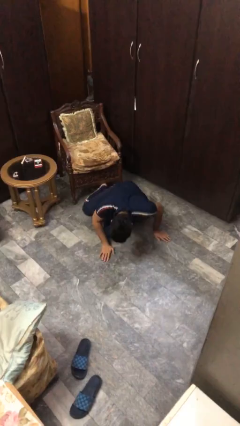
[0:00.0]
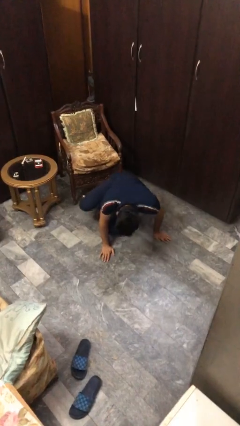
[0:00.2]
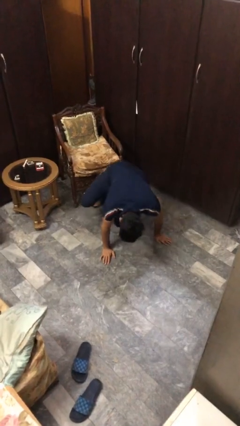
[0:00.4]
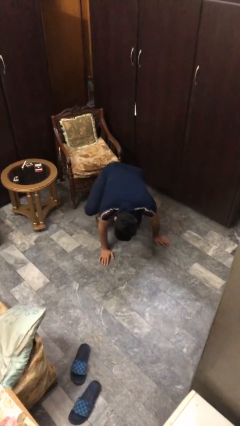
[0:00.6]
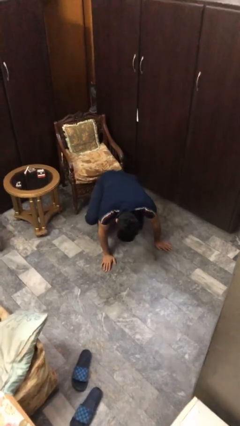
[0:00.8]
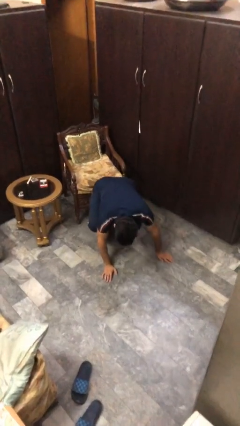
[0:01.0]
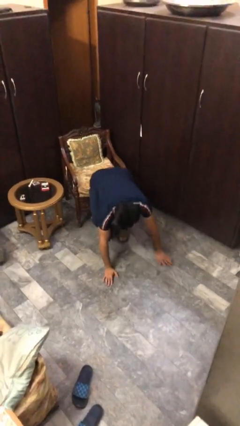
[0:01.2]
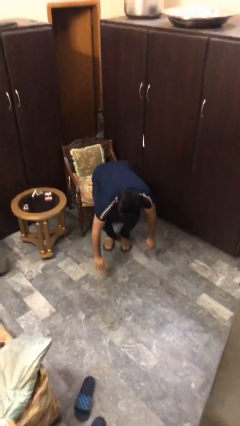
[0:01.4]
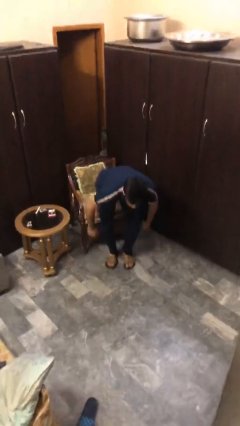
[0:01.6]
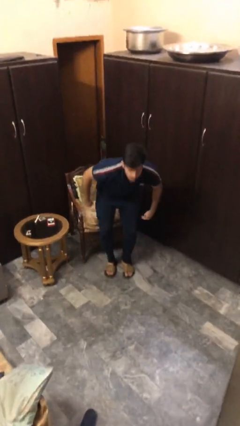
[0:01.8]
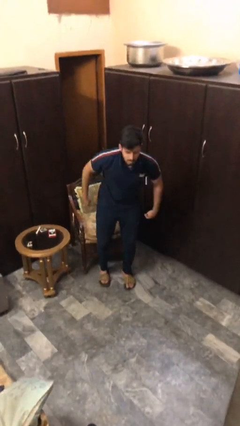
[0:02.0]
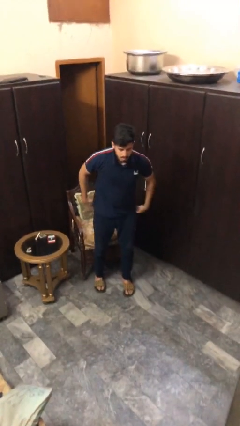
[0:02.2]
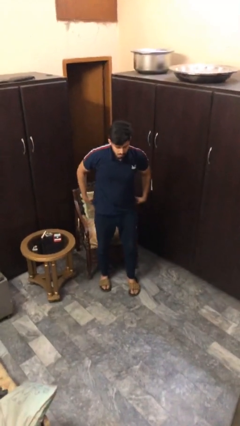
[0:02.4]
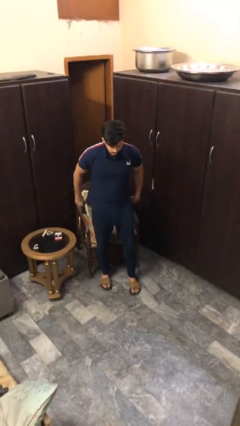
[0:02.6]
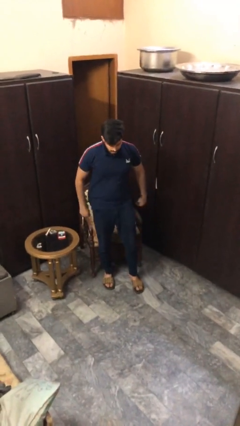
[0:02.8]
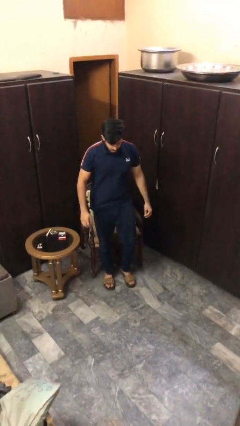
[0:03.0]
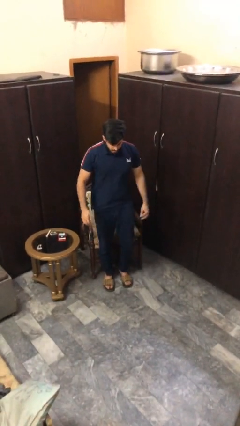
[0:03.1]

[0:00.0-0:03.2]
person stands up from floor

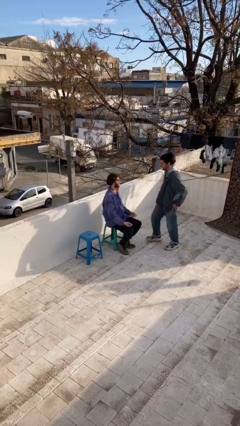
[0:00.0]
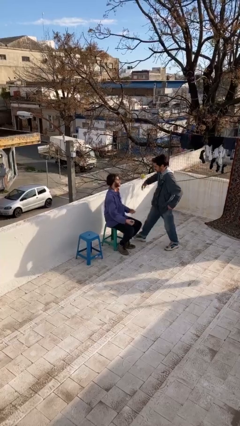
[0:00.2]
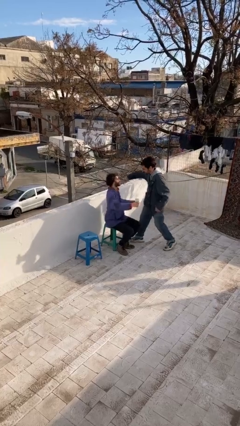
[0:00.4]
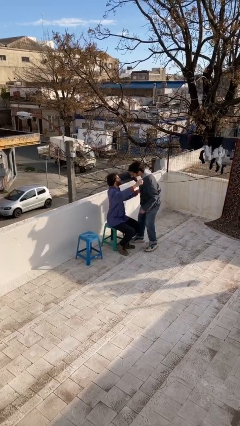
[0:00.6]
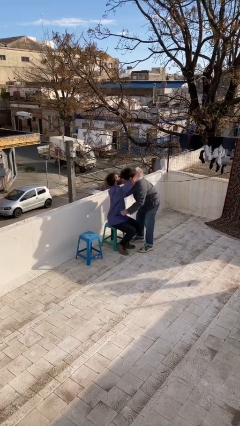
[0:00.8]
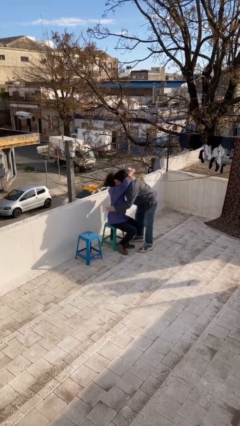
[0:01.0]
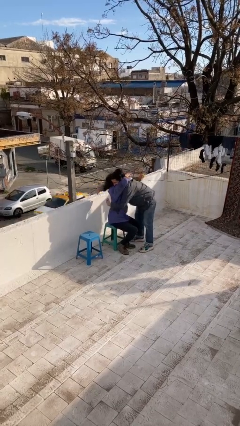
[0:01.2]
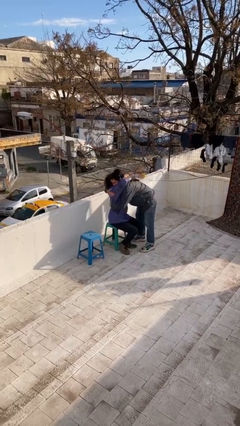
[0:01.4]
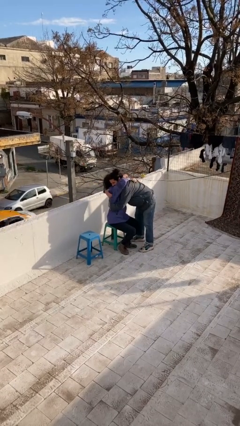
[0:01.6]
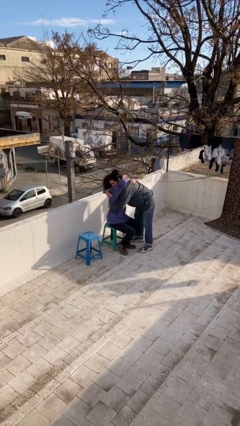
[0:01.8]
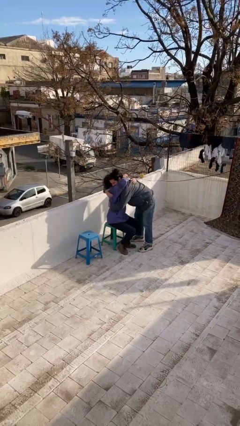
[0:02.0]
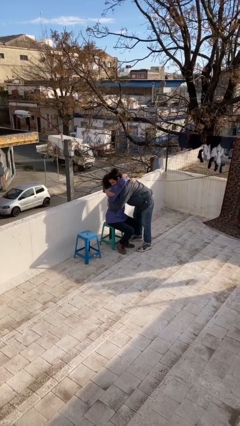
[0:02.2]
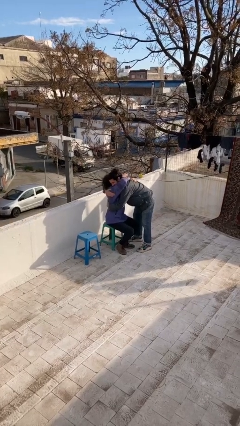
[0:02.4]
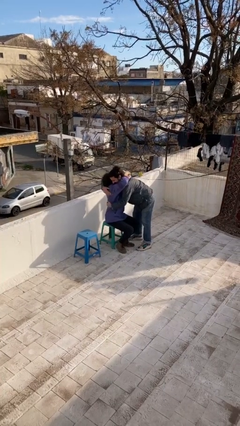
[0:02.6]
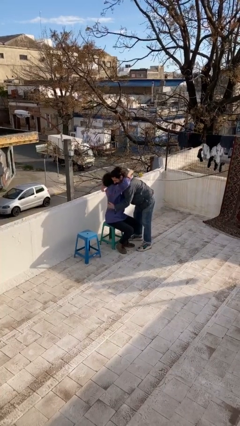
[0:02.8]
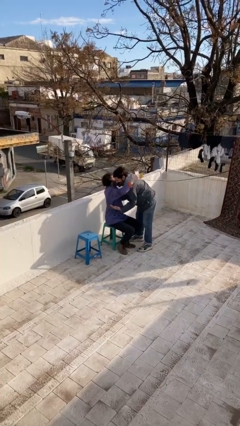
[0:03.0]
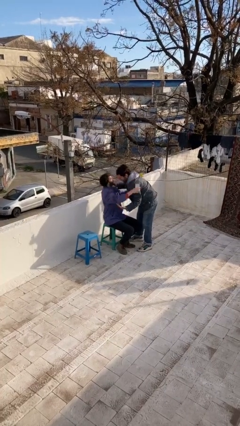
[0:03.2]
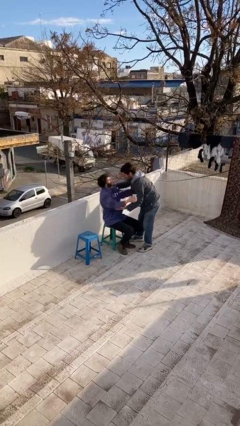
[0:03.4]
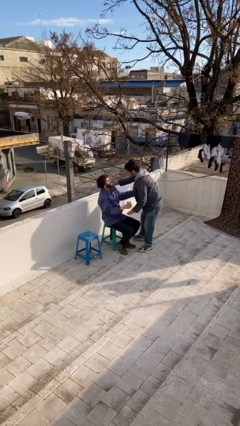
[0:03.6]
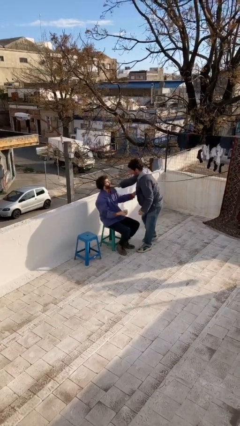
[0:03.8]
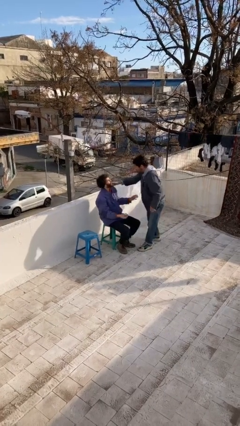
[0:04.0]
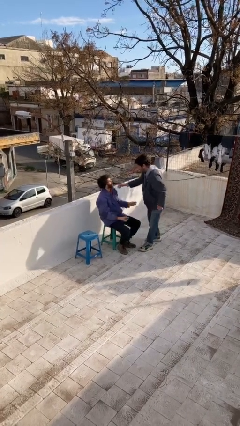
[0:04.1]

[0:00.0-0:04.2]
person embraces person

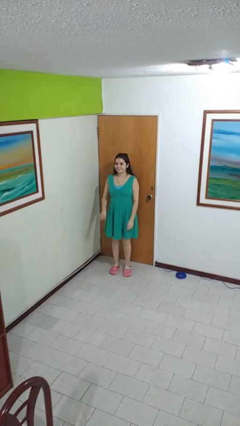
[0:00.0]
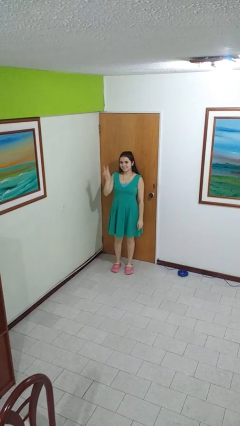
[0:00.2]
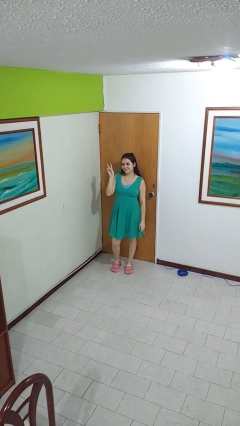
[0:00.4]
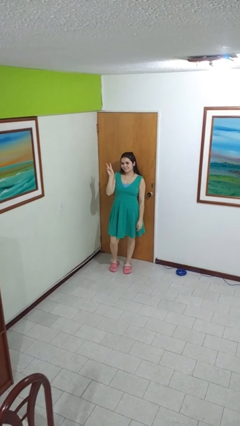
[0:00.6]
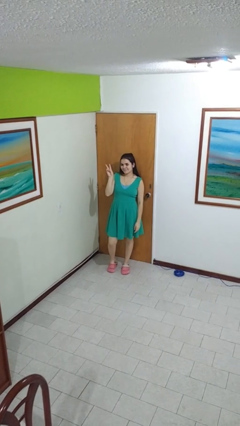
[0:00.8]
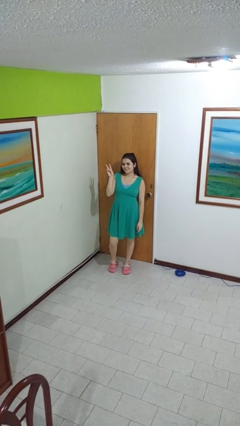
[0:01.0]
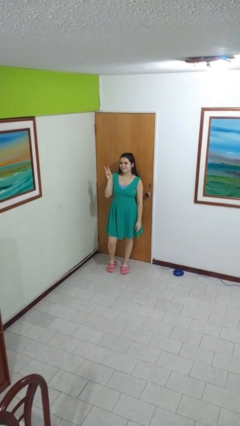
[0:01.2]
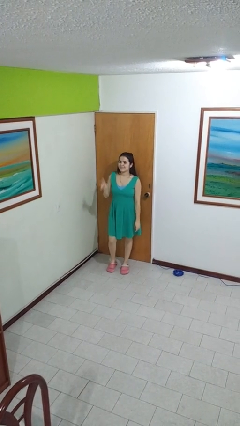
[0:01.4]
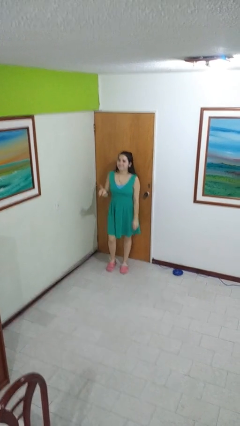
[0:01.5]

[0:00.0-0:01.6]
person gestures peace

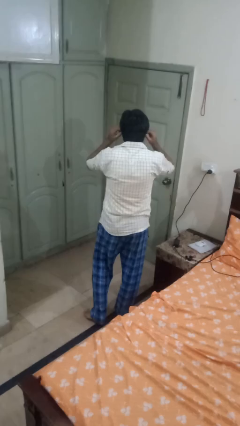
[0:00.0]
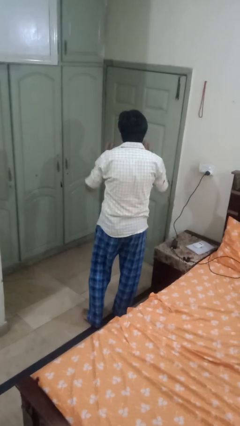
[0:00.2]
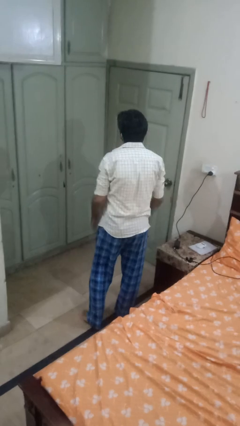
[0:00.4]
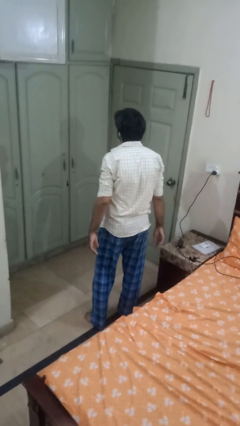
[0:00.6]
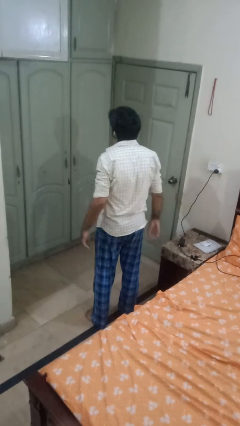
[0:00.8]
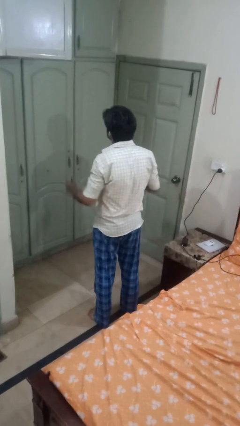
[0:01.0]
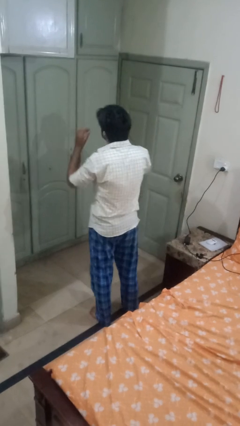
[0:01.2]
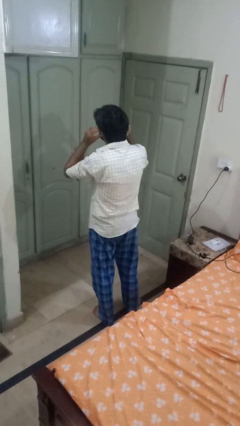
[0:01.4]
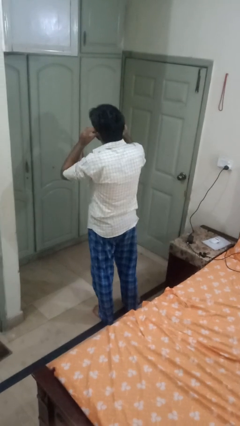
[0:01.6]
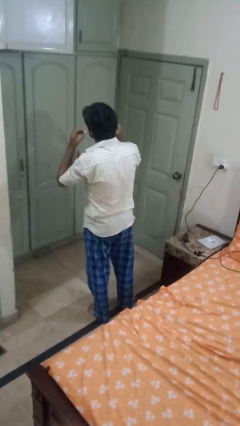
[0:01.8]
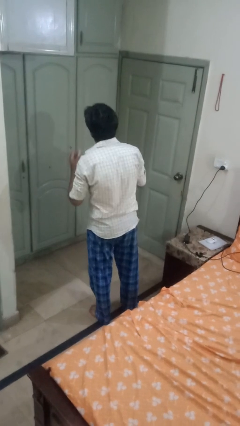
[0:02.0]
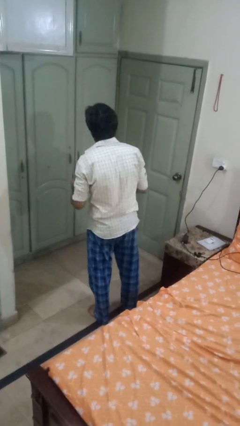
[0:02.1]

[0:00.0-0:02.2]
person takes off headphones

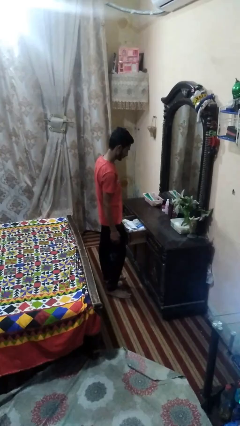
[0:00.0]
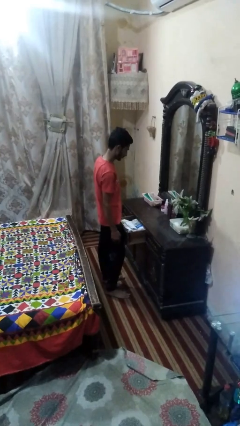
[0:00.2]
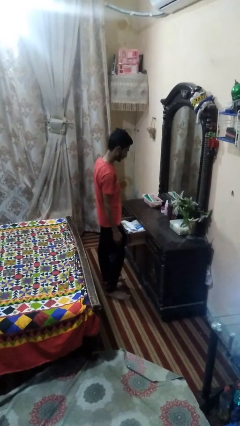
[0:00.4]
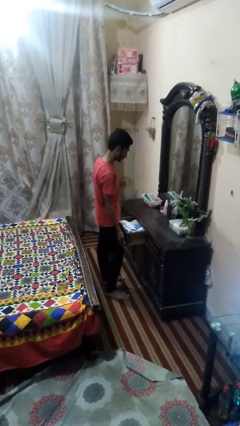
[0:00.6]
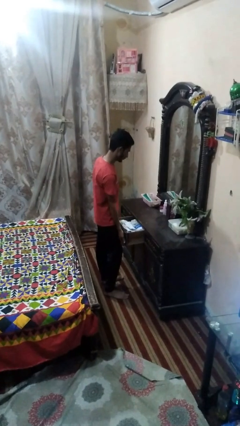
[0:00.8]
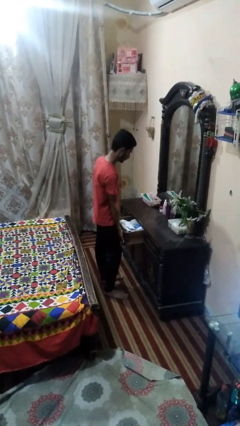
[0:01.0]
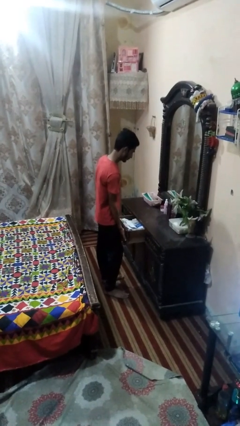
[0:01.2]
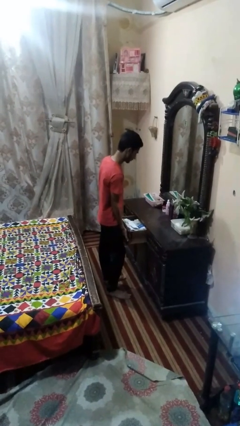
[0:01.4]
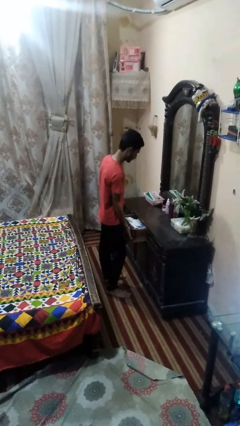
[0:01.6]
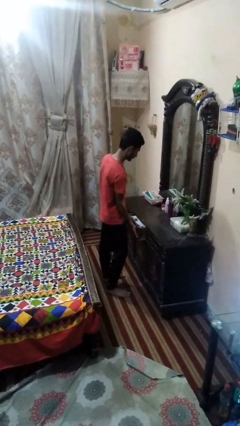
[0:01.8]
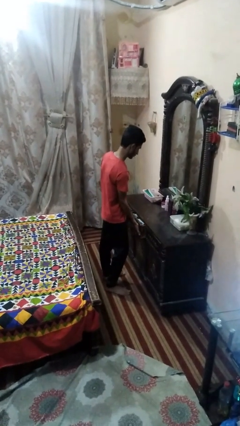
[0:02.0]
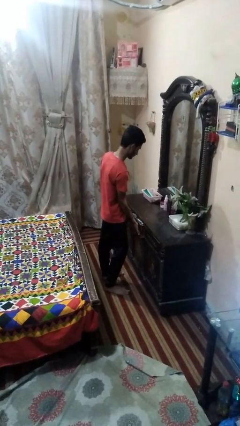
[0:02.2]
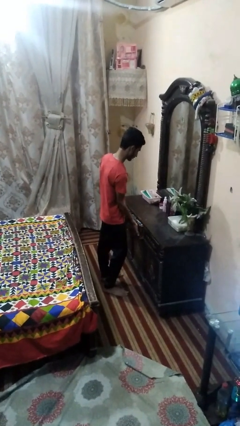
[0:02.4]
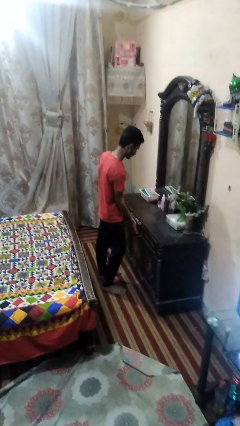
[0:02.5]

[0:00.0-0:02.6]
person closes dresser drawer

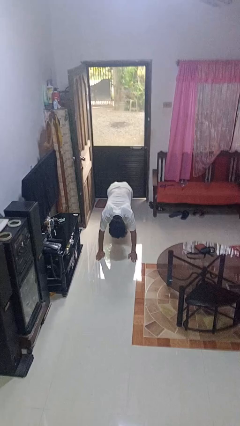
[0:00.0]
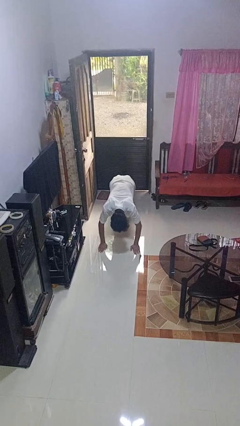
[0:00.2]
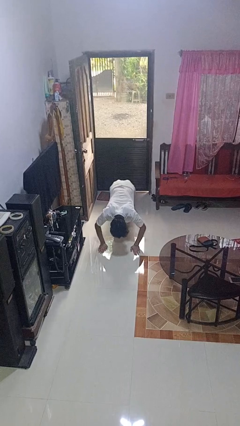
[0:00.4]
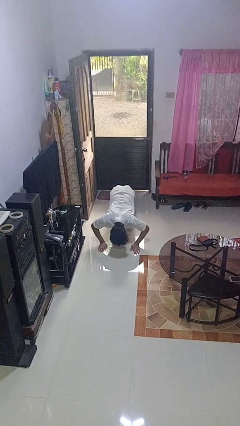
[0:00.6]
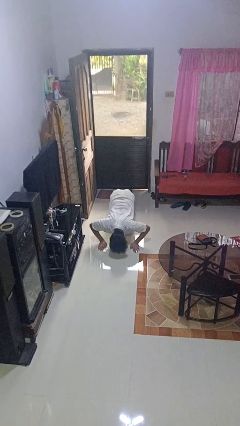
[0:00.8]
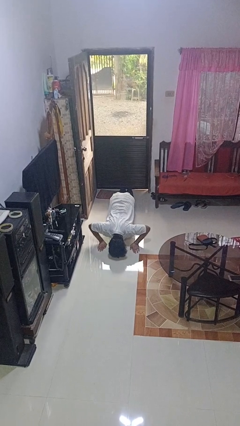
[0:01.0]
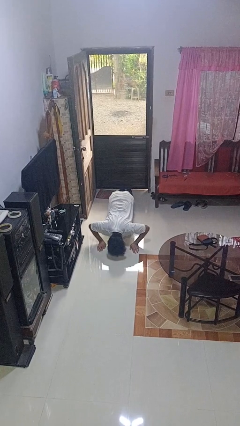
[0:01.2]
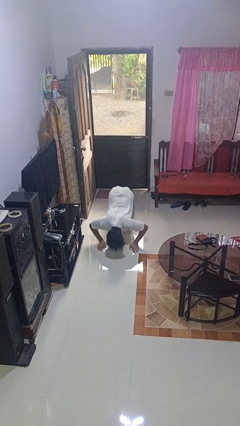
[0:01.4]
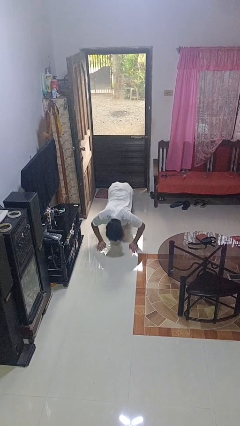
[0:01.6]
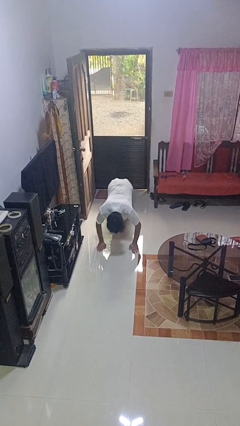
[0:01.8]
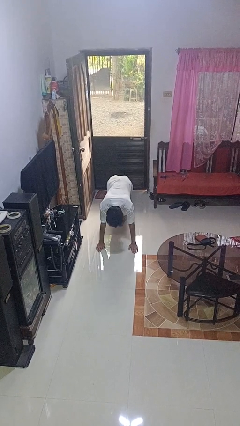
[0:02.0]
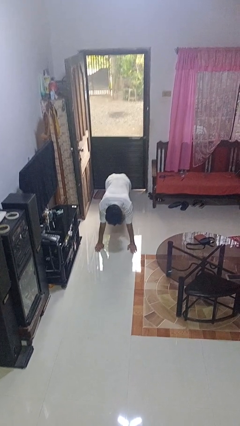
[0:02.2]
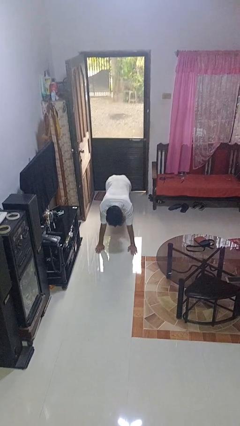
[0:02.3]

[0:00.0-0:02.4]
person exercises with pushup

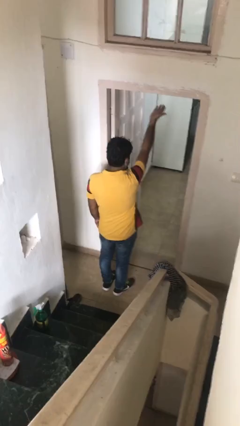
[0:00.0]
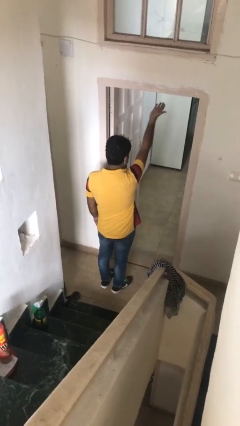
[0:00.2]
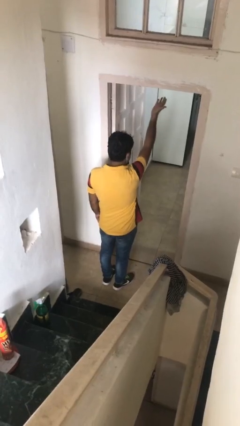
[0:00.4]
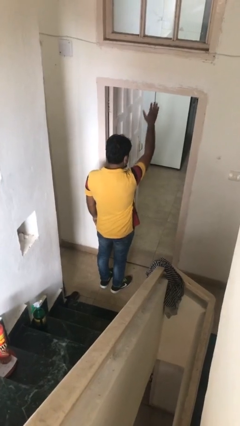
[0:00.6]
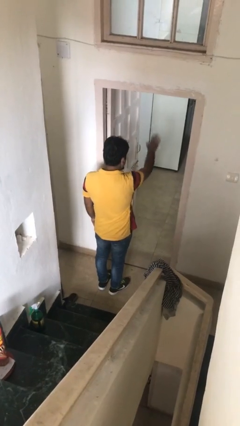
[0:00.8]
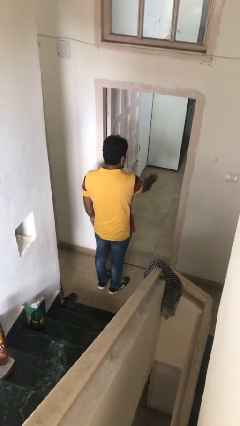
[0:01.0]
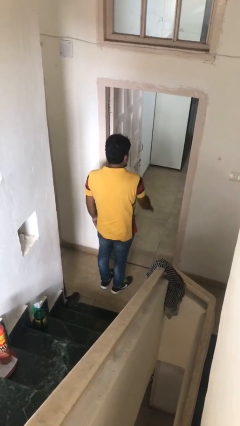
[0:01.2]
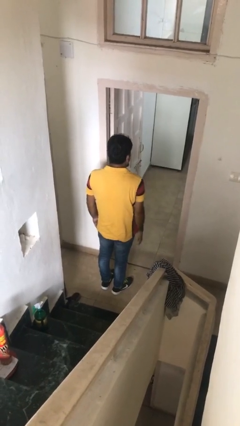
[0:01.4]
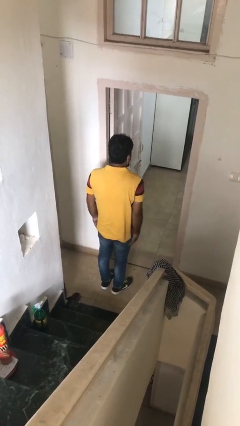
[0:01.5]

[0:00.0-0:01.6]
person gestures swipe down
